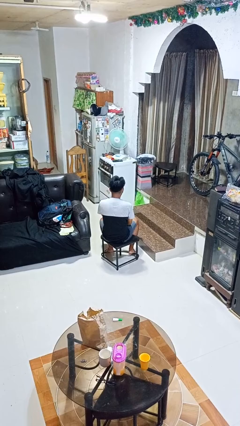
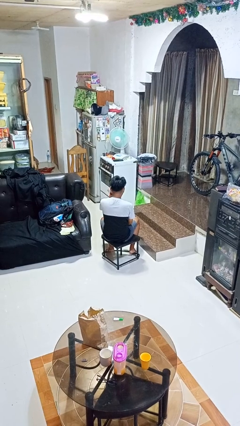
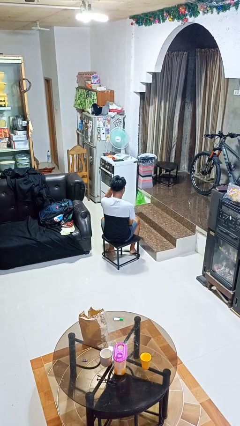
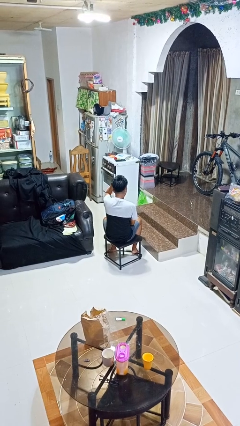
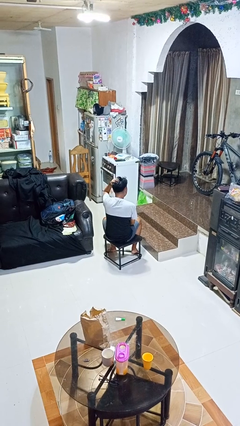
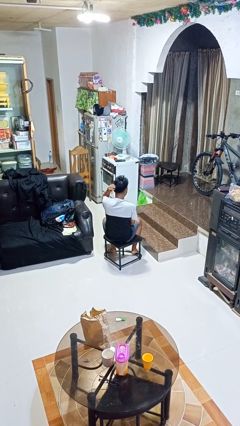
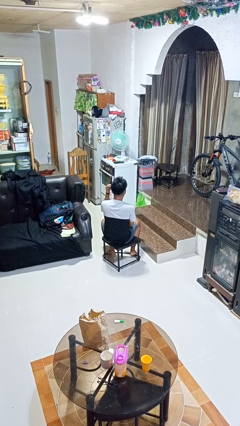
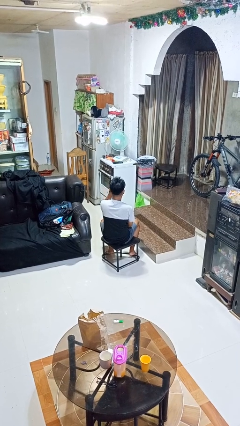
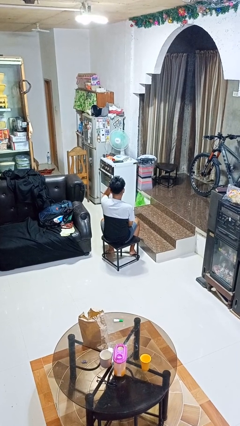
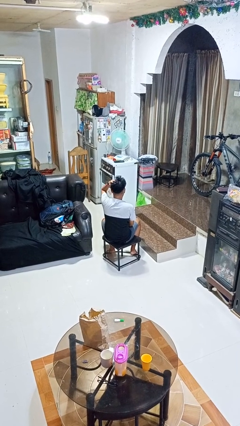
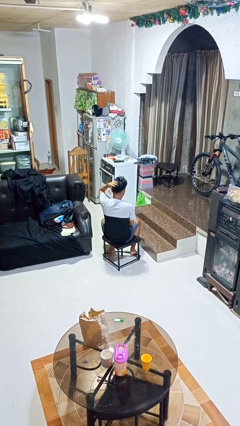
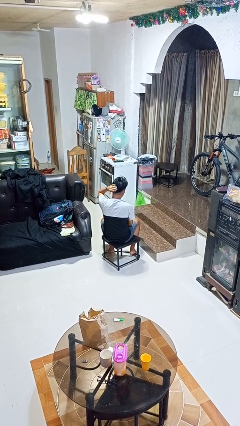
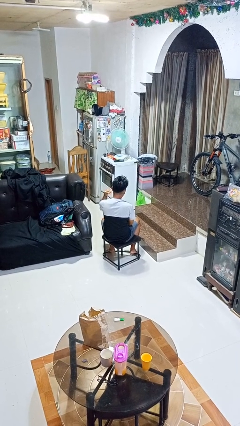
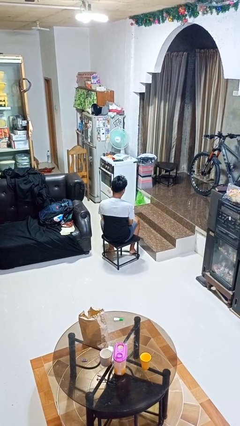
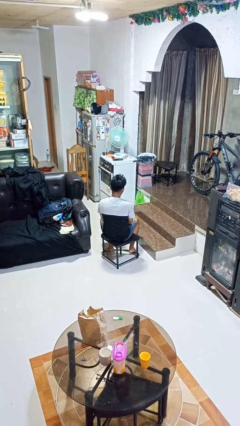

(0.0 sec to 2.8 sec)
person strokes hair

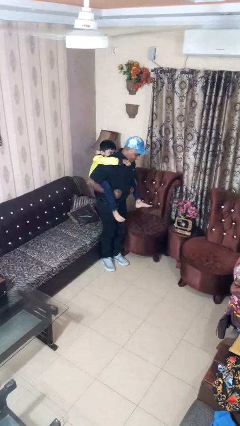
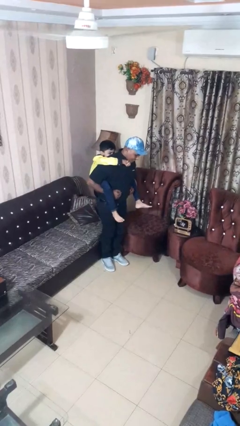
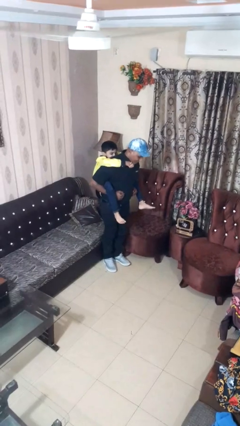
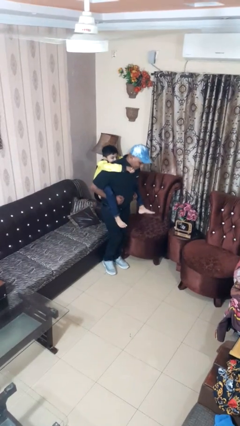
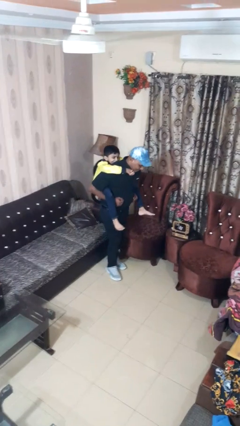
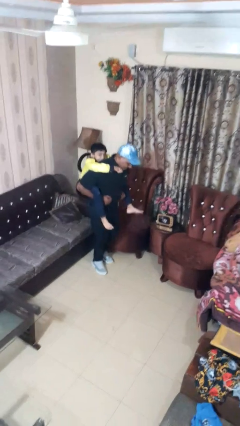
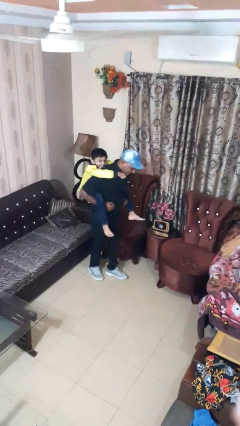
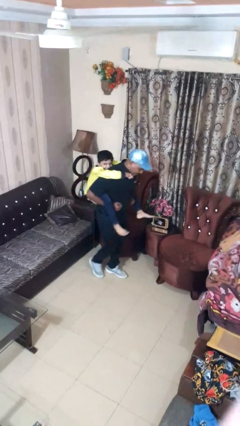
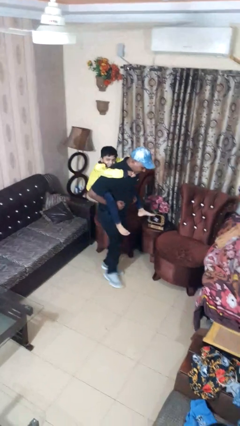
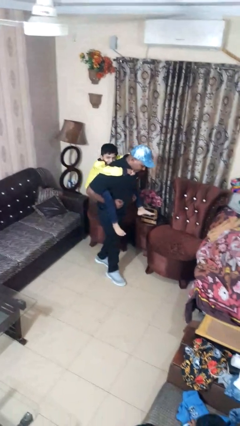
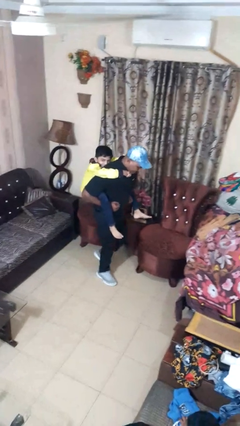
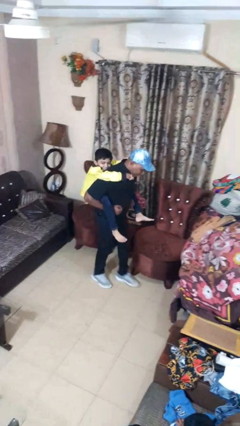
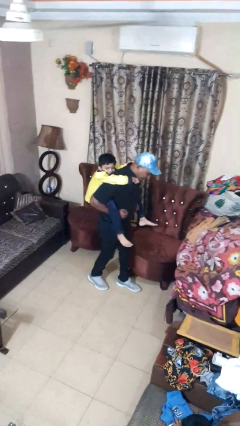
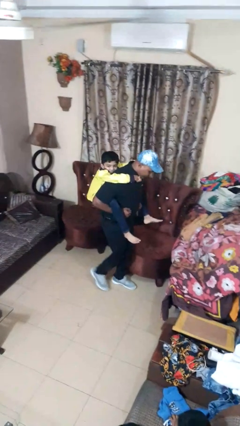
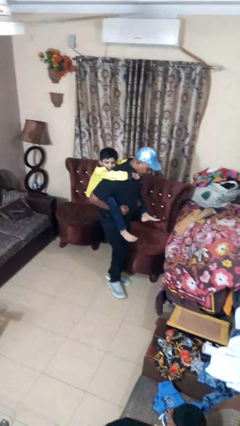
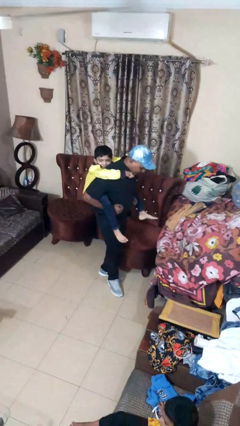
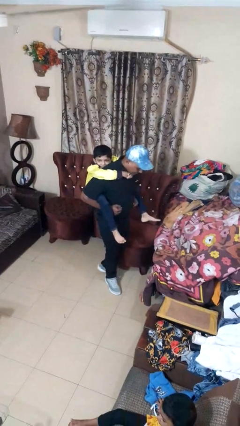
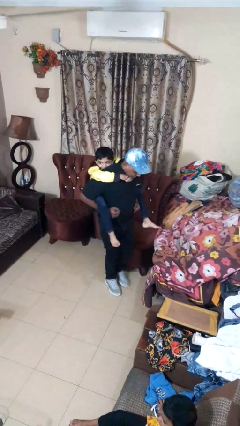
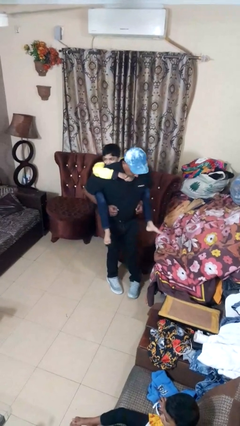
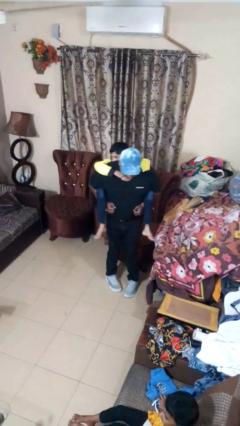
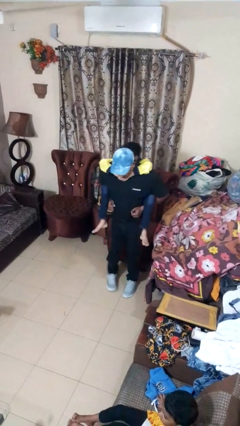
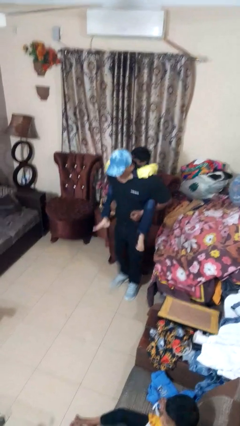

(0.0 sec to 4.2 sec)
person carries person on back

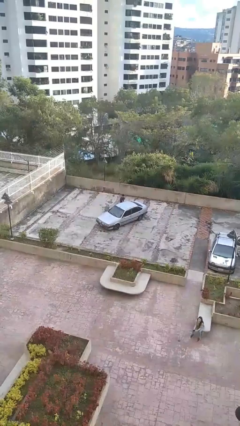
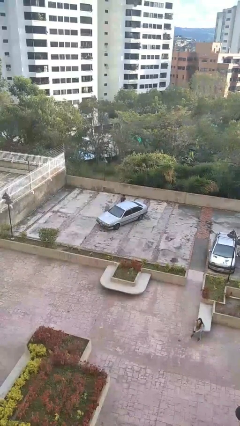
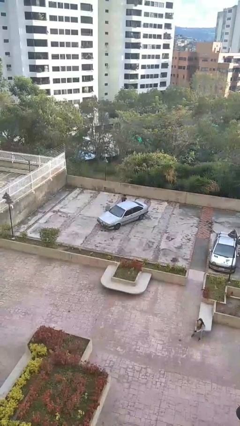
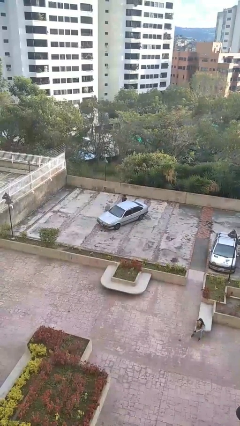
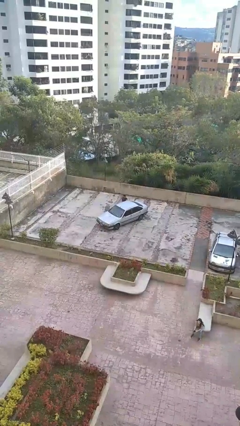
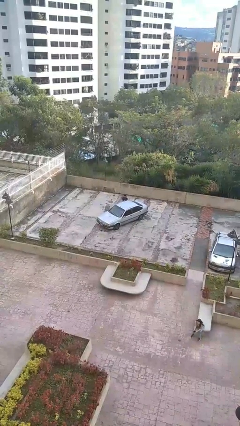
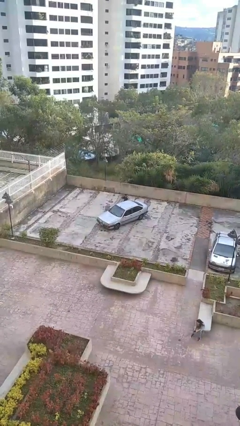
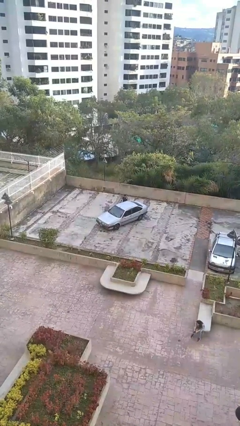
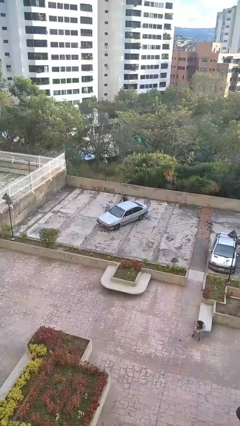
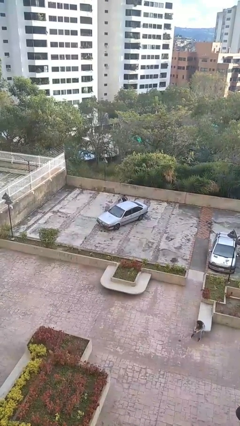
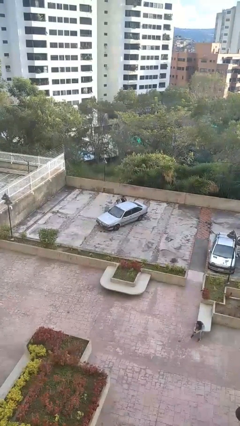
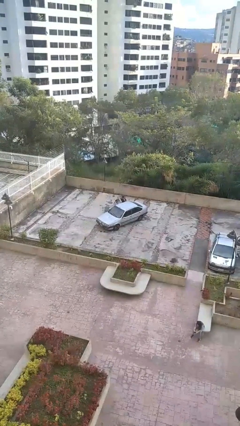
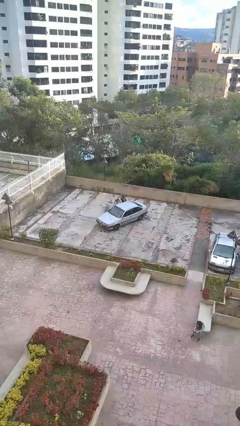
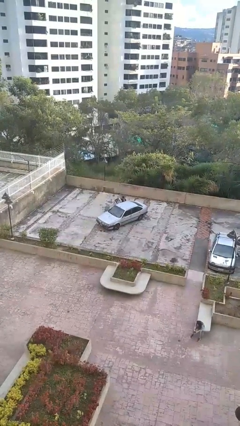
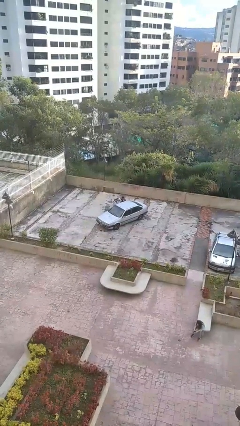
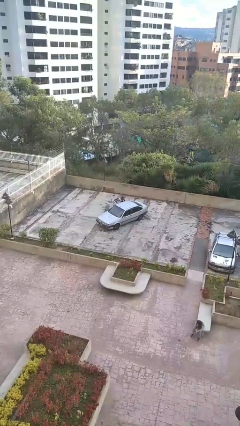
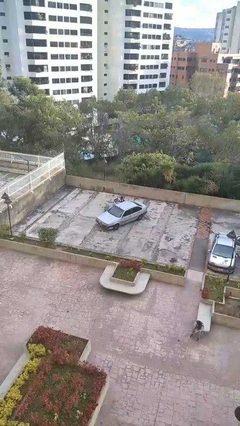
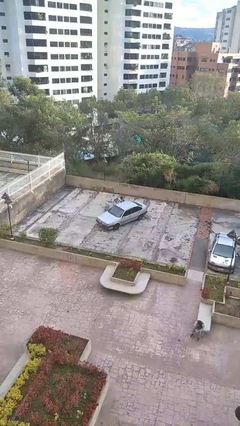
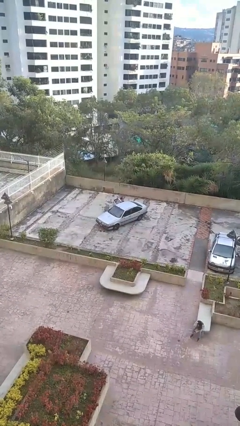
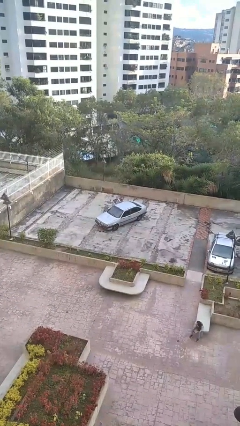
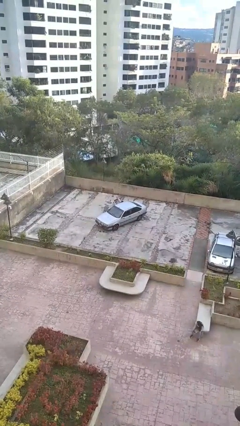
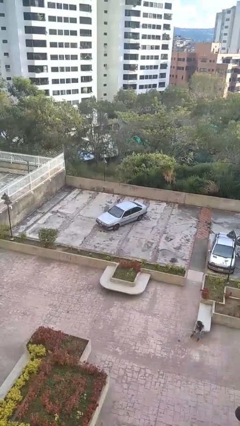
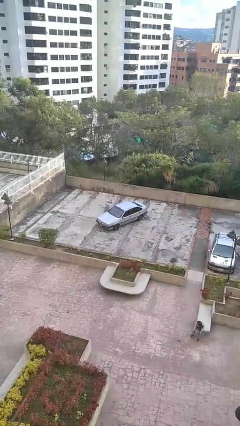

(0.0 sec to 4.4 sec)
car picks up person

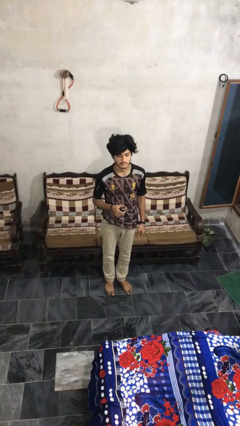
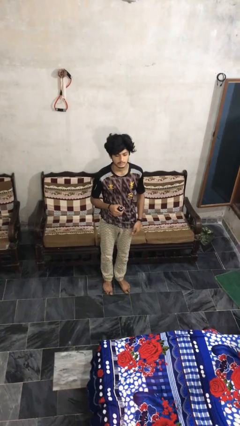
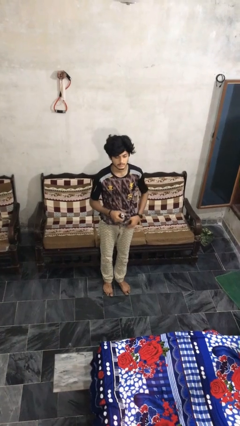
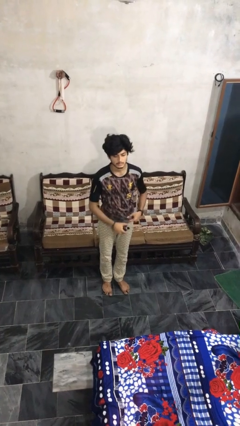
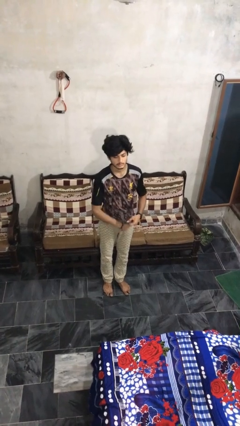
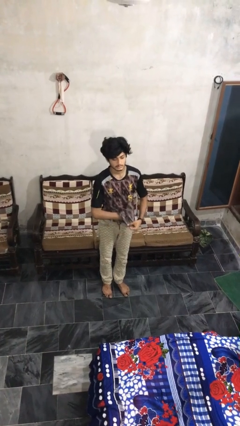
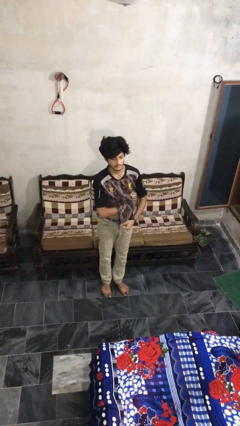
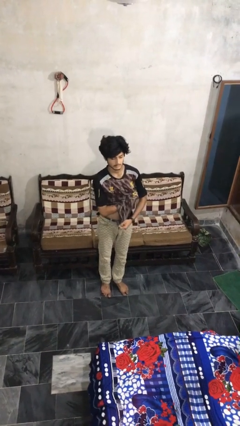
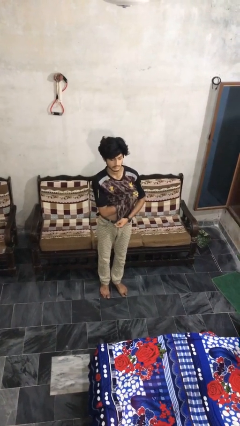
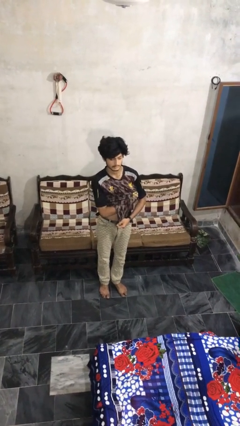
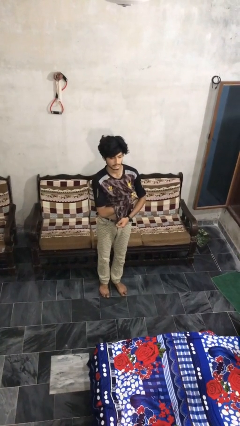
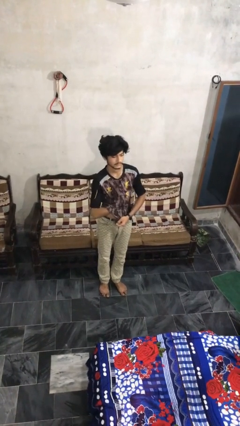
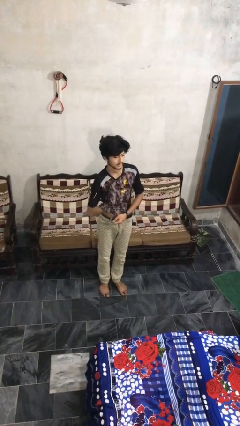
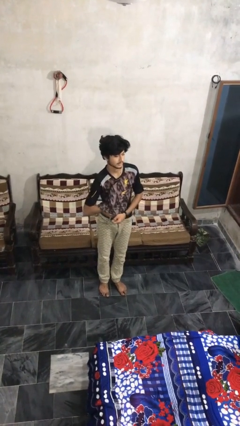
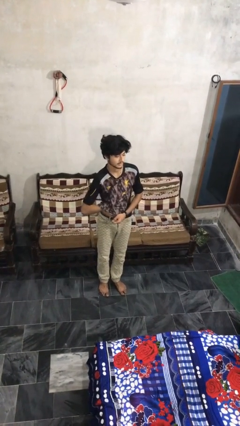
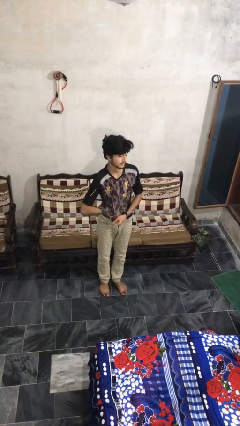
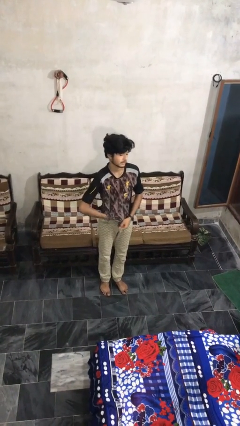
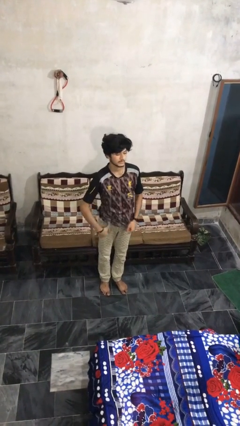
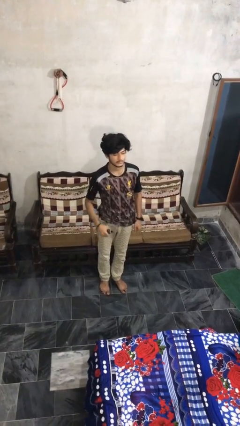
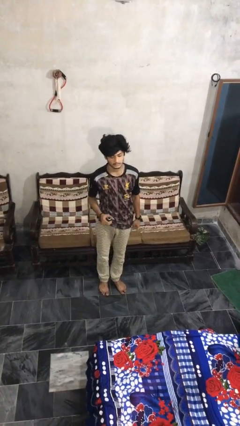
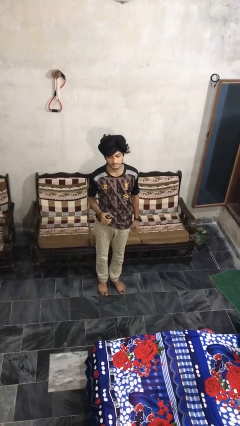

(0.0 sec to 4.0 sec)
person applies deodorant

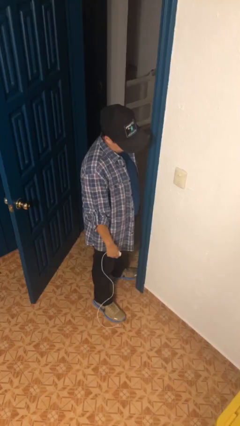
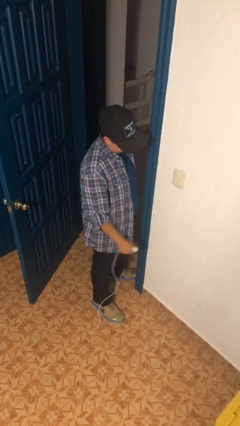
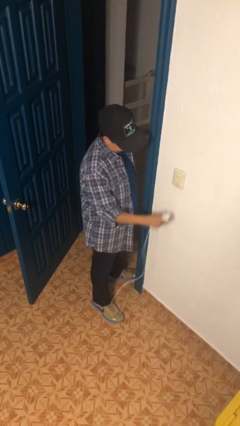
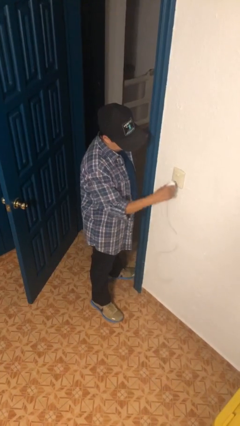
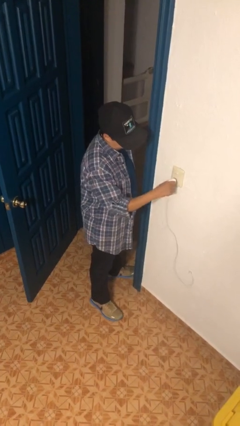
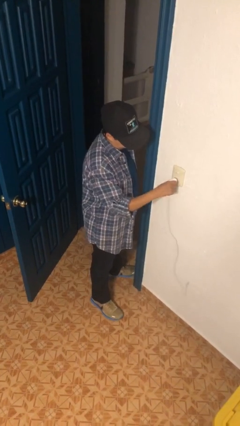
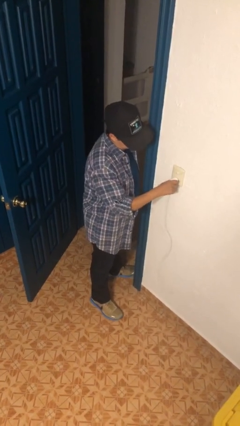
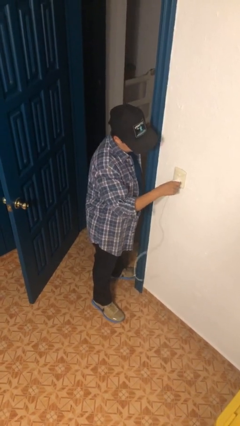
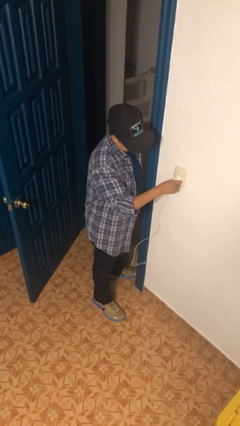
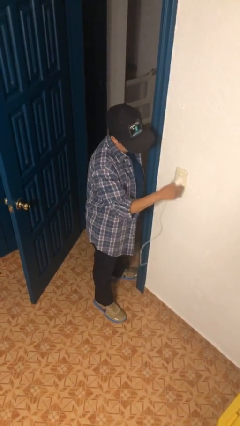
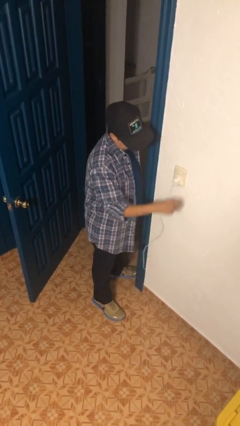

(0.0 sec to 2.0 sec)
person plugs into electrical socket
